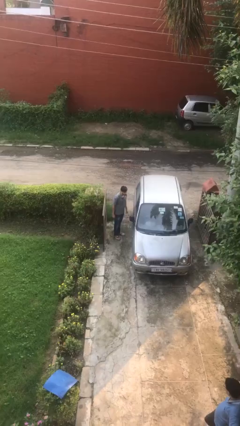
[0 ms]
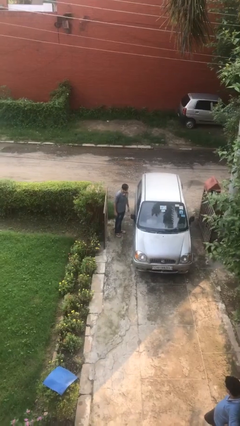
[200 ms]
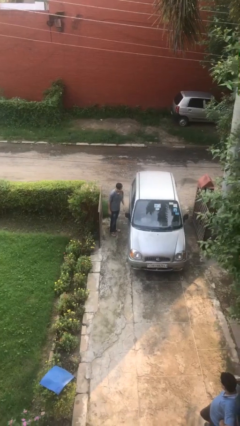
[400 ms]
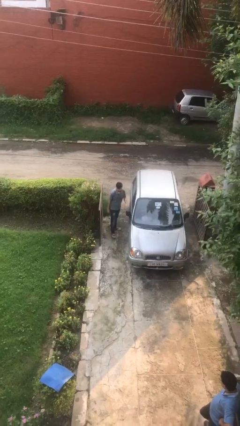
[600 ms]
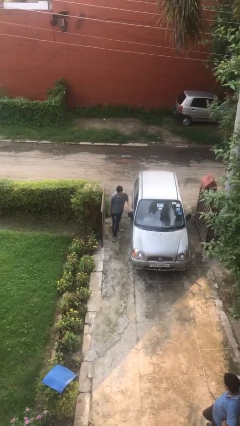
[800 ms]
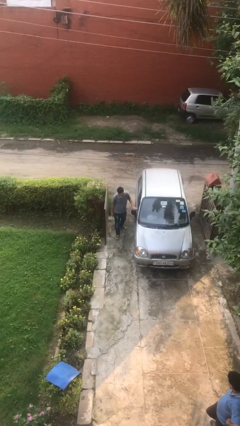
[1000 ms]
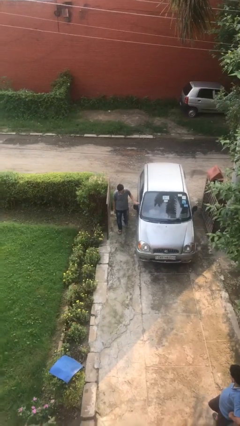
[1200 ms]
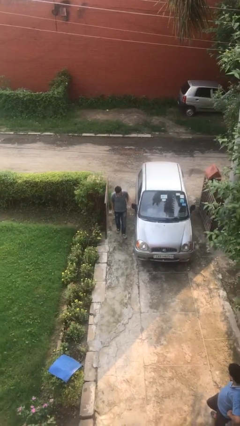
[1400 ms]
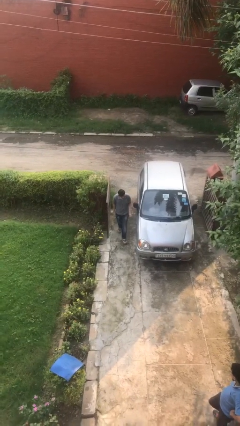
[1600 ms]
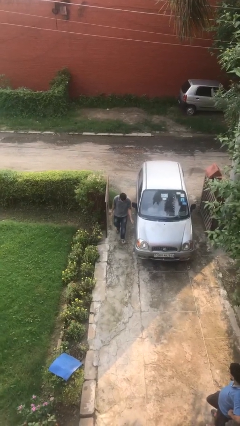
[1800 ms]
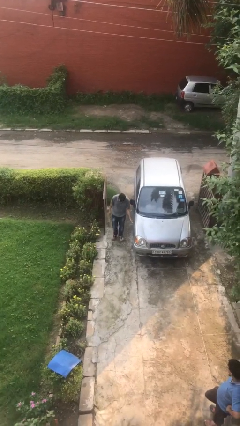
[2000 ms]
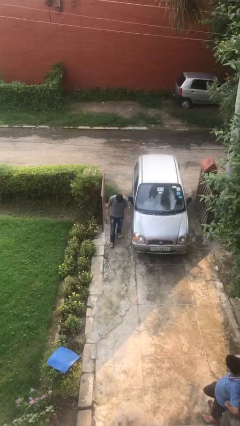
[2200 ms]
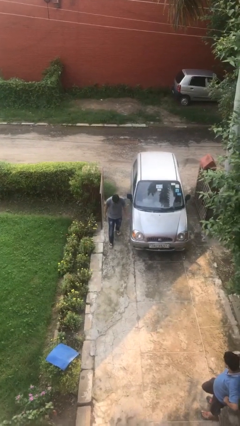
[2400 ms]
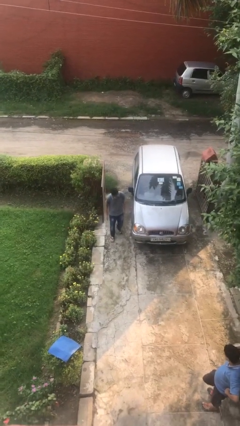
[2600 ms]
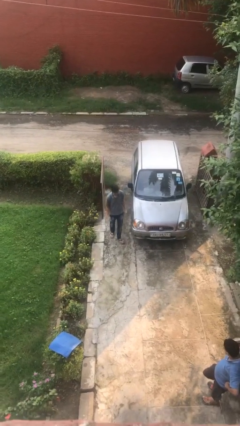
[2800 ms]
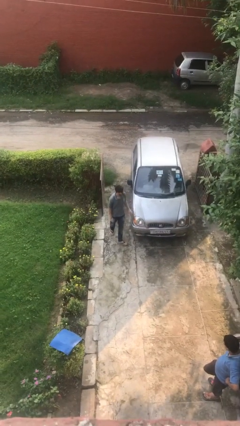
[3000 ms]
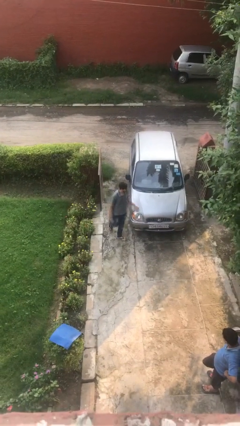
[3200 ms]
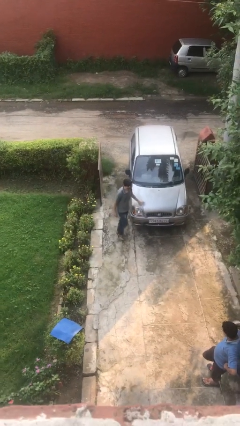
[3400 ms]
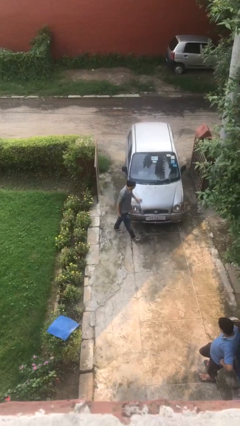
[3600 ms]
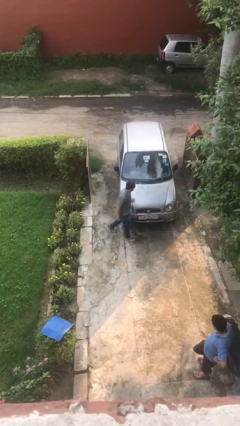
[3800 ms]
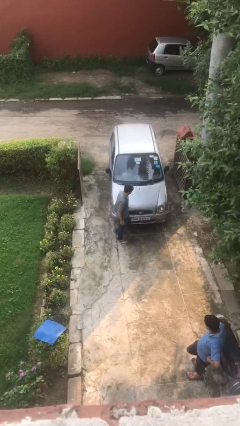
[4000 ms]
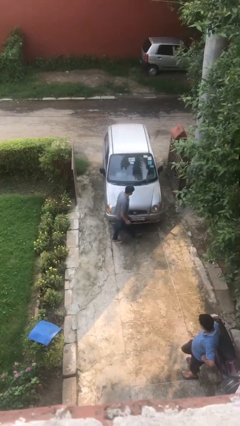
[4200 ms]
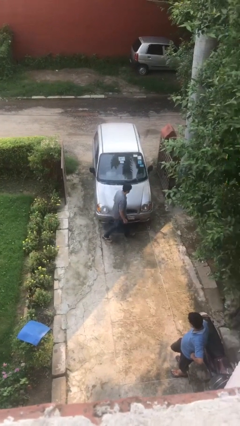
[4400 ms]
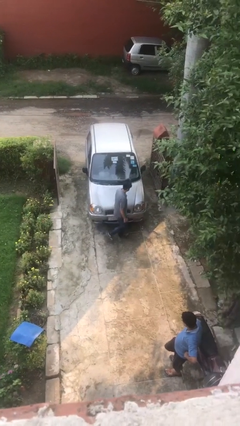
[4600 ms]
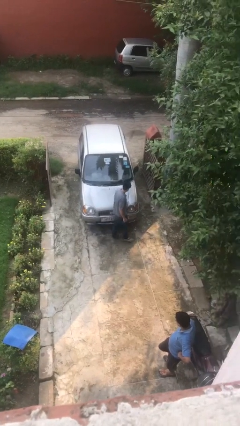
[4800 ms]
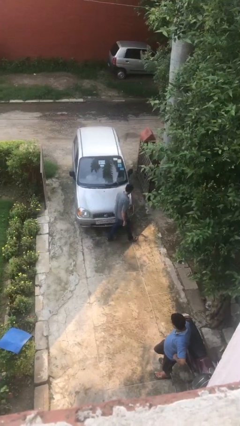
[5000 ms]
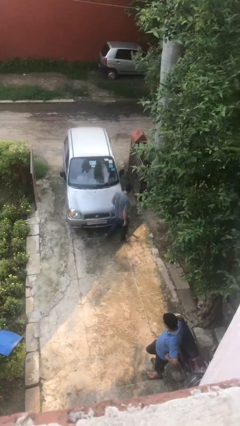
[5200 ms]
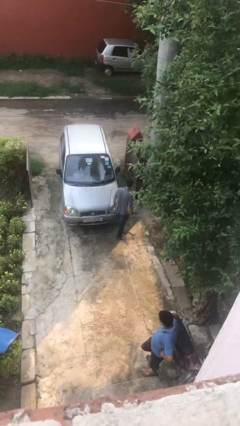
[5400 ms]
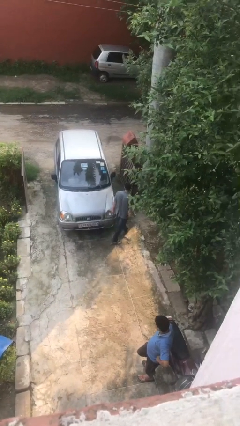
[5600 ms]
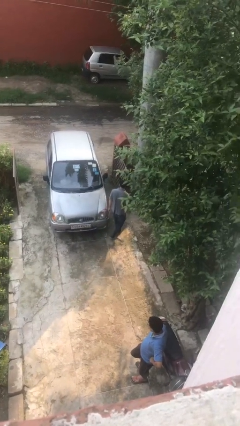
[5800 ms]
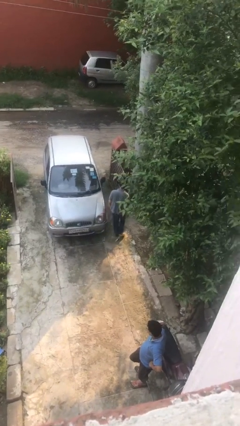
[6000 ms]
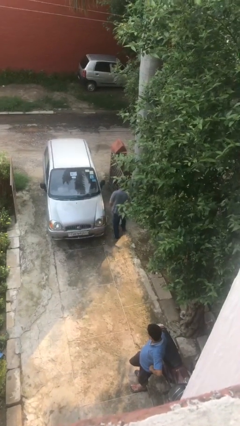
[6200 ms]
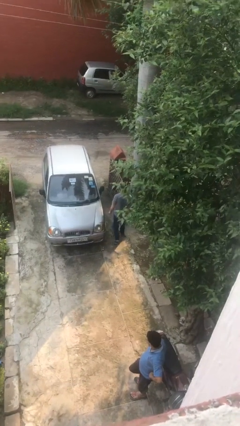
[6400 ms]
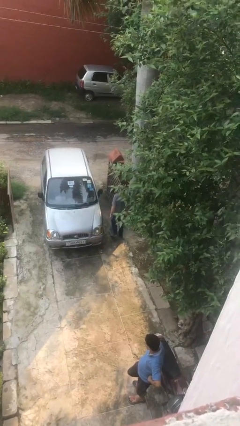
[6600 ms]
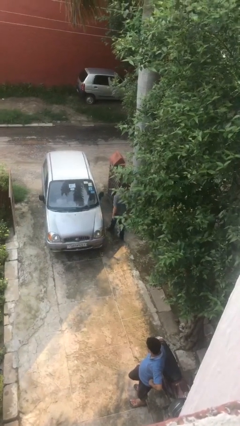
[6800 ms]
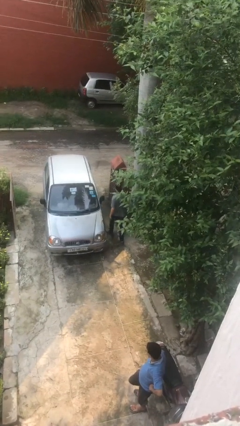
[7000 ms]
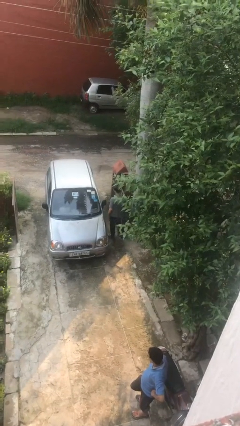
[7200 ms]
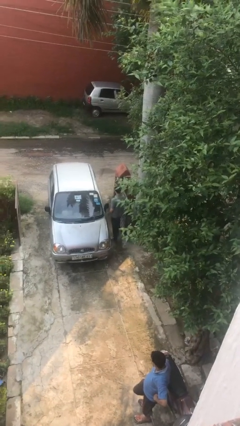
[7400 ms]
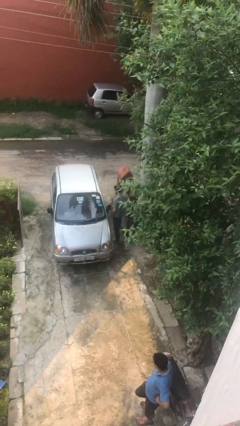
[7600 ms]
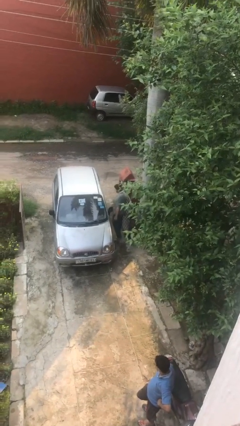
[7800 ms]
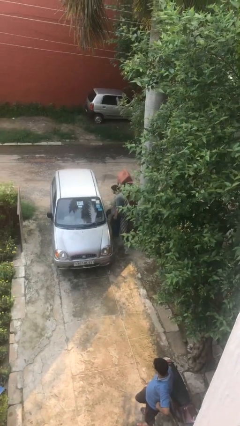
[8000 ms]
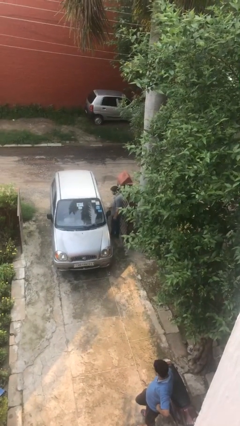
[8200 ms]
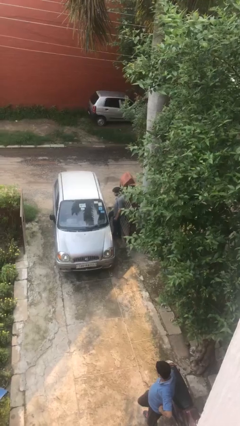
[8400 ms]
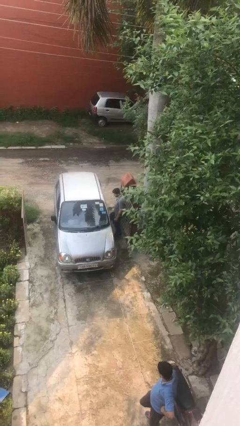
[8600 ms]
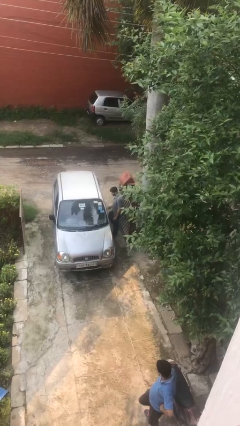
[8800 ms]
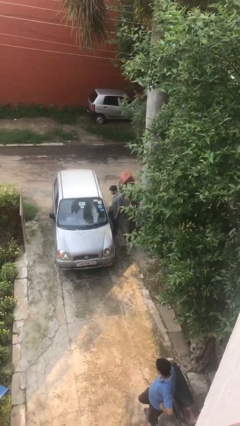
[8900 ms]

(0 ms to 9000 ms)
person walks around car

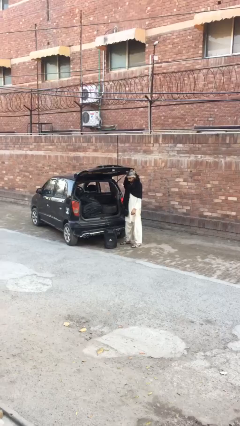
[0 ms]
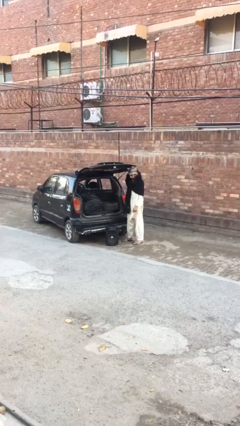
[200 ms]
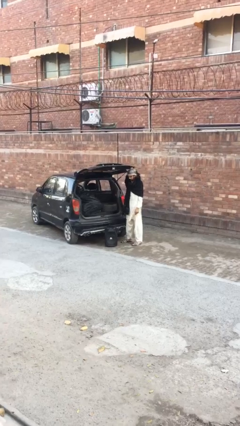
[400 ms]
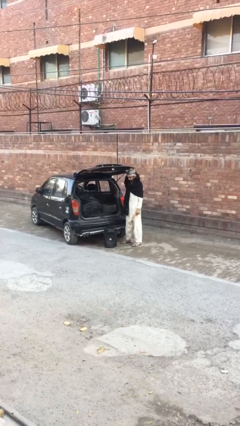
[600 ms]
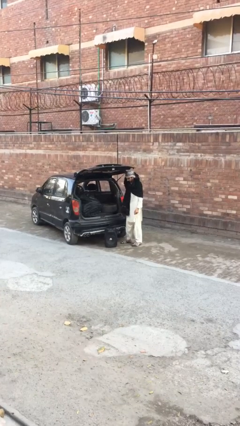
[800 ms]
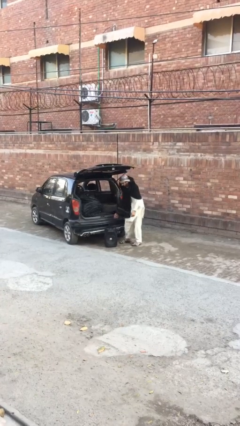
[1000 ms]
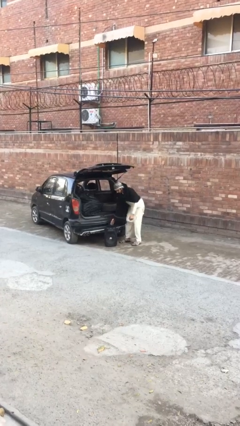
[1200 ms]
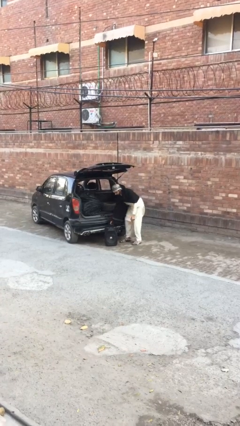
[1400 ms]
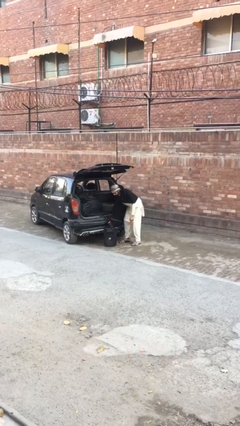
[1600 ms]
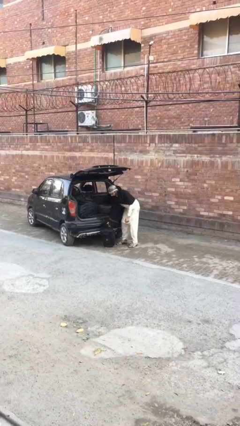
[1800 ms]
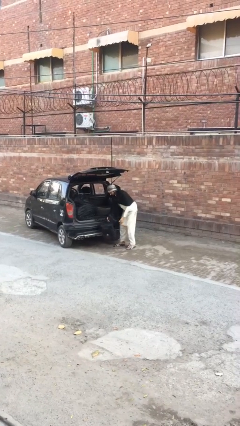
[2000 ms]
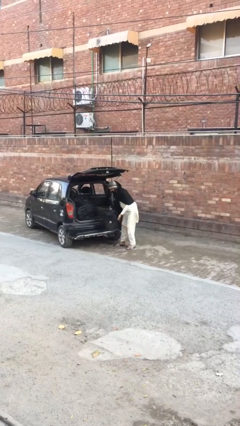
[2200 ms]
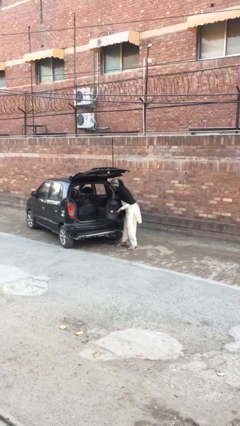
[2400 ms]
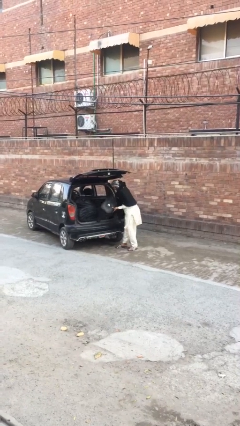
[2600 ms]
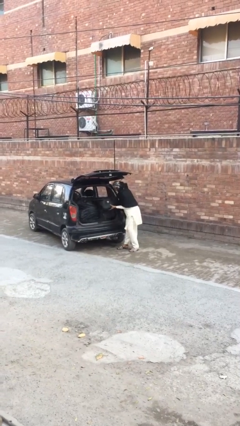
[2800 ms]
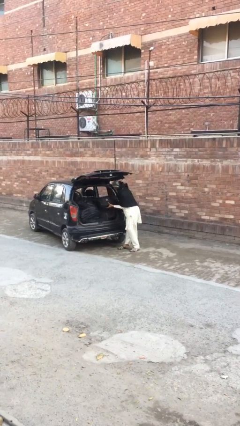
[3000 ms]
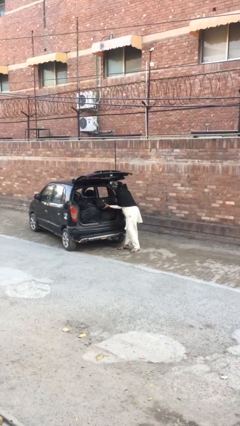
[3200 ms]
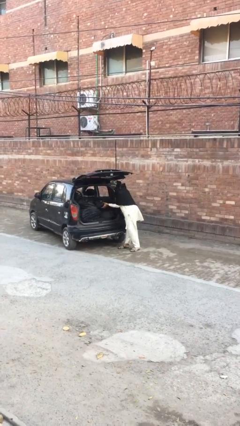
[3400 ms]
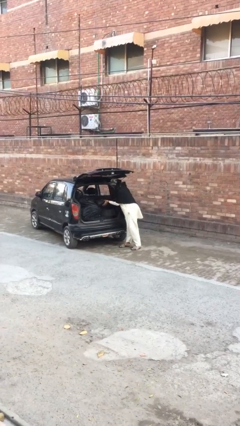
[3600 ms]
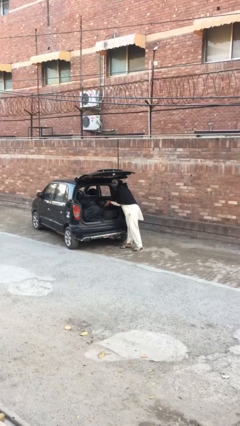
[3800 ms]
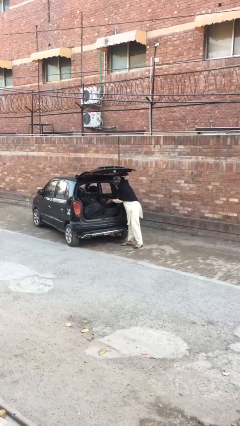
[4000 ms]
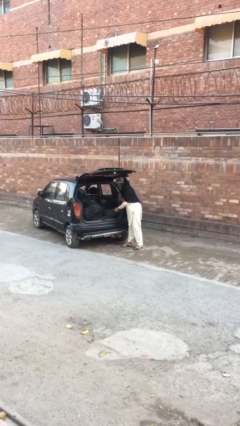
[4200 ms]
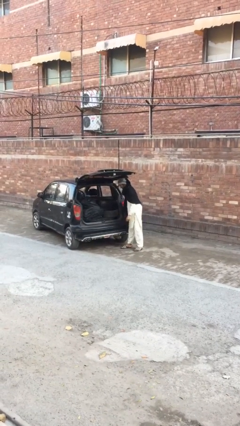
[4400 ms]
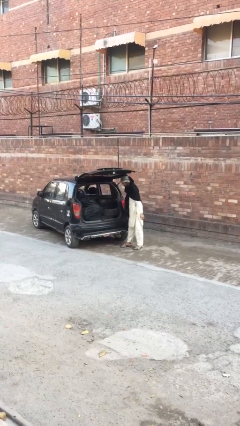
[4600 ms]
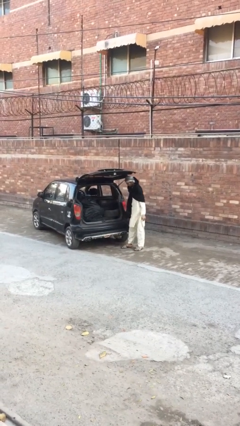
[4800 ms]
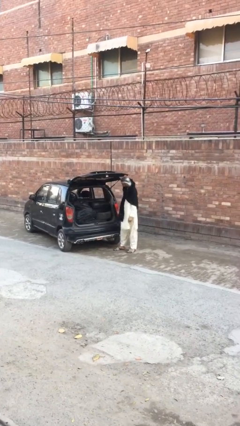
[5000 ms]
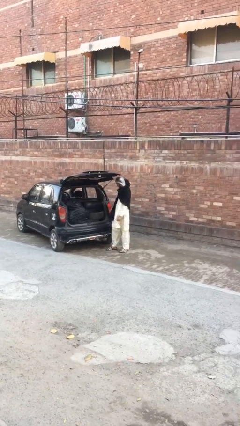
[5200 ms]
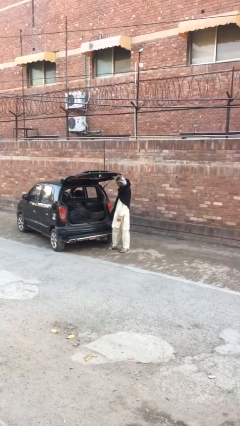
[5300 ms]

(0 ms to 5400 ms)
person loads car

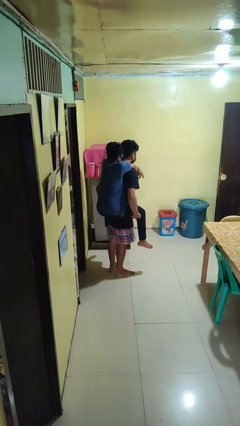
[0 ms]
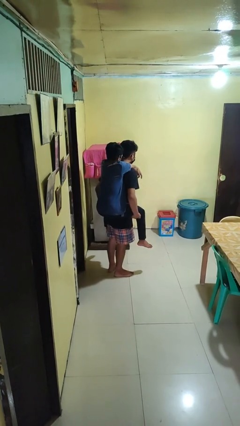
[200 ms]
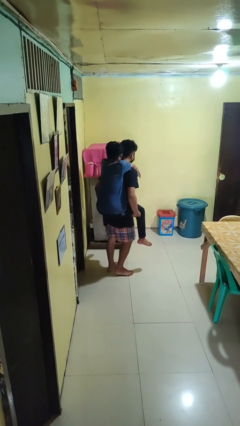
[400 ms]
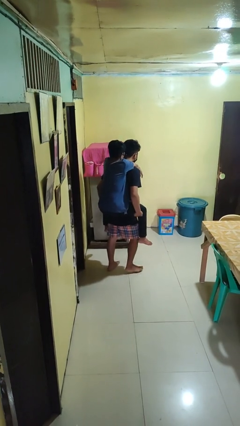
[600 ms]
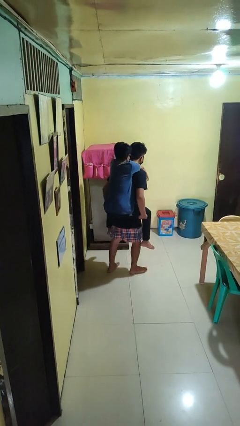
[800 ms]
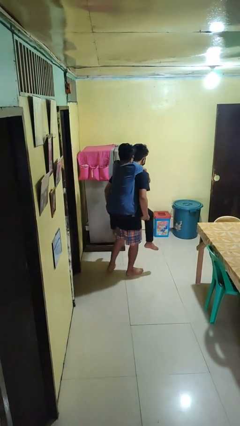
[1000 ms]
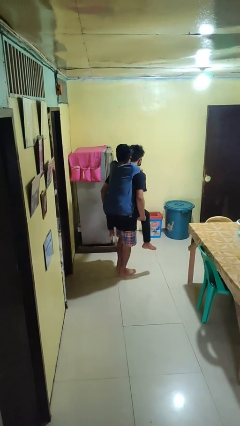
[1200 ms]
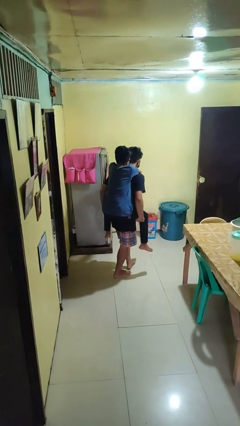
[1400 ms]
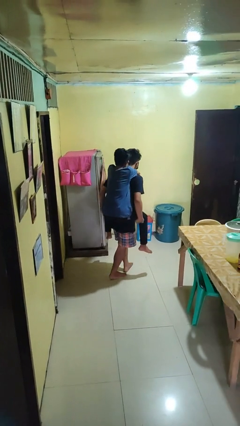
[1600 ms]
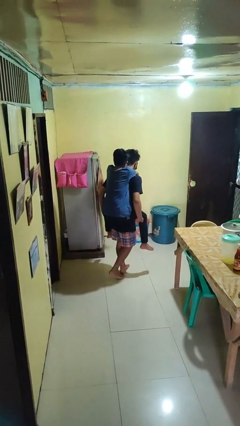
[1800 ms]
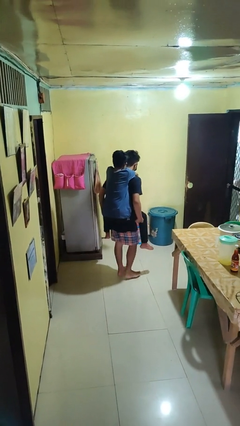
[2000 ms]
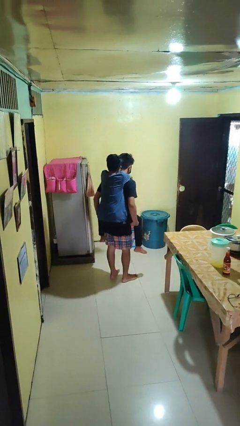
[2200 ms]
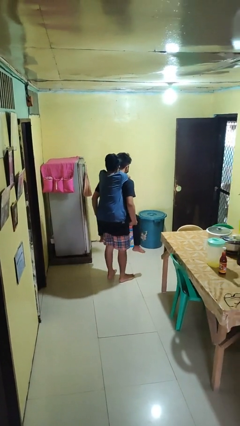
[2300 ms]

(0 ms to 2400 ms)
person carries person on back

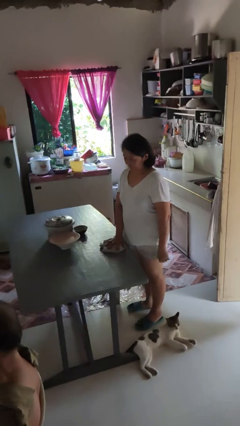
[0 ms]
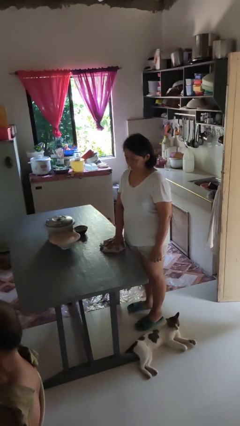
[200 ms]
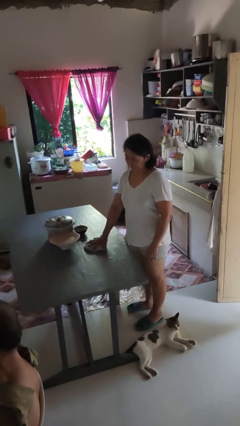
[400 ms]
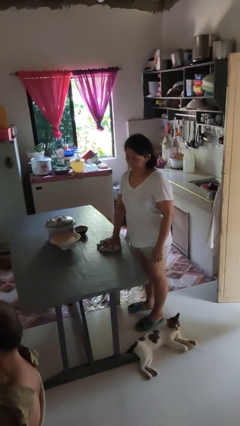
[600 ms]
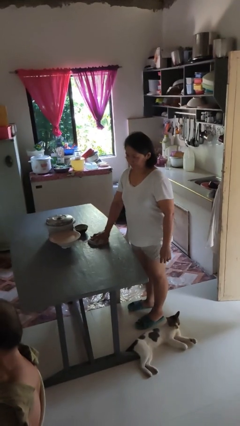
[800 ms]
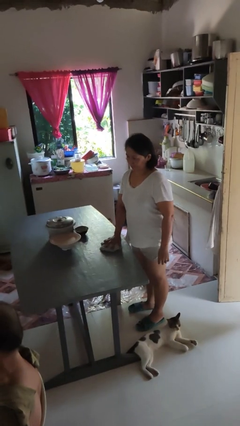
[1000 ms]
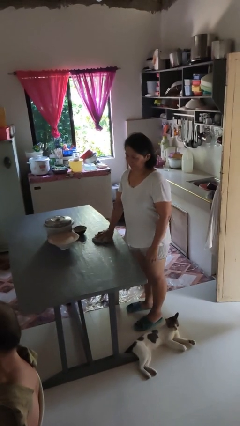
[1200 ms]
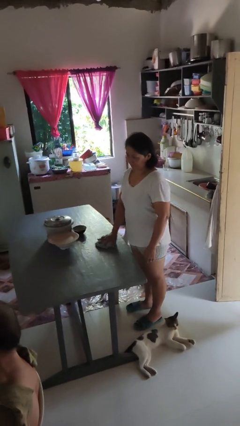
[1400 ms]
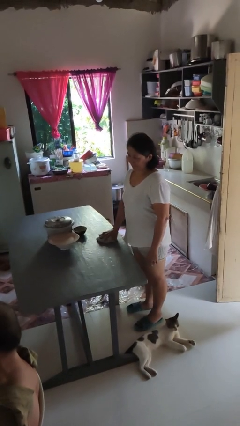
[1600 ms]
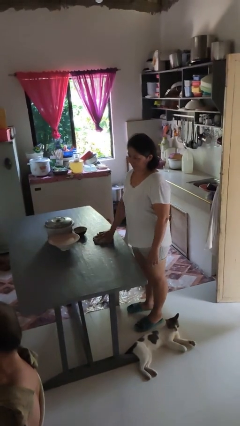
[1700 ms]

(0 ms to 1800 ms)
person cleans table with rag
